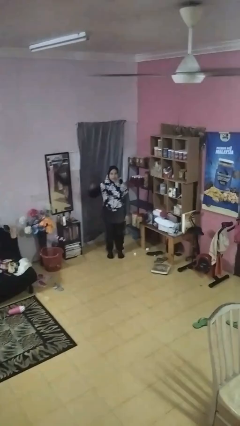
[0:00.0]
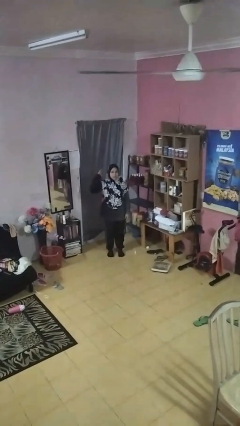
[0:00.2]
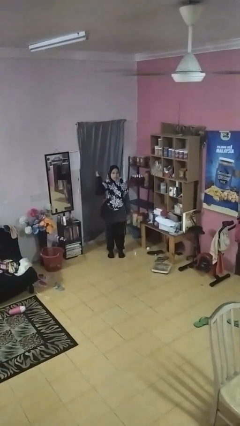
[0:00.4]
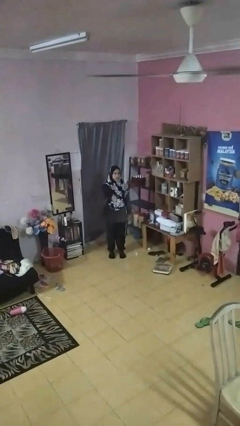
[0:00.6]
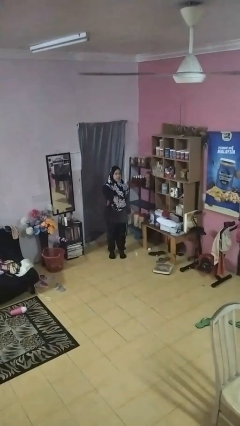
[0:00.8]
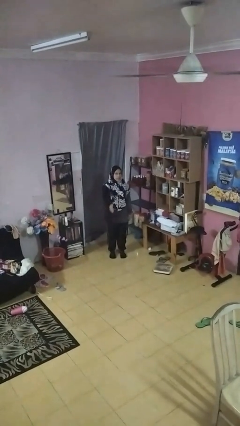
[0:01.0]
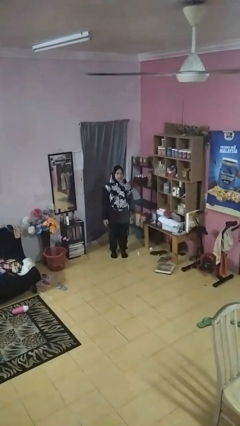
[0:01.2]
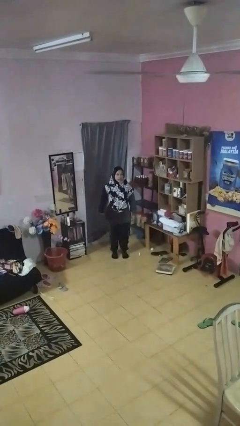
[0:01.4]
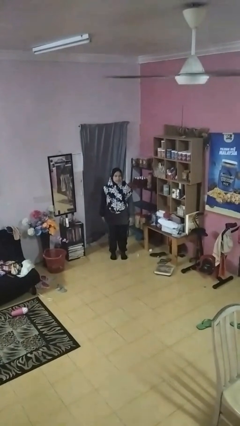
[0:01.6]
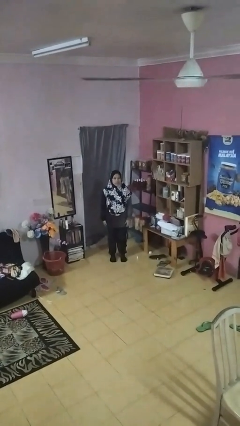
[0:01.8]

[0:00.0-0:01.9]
person karate chop

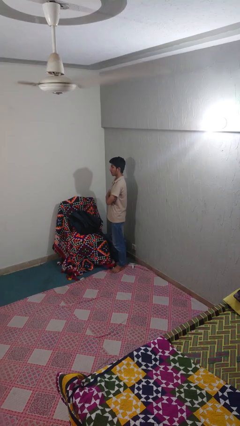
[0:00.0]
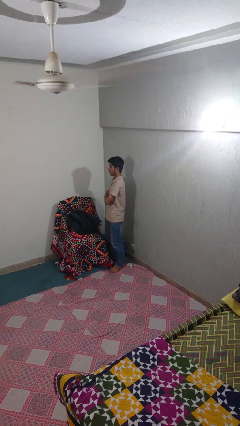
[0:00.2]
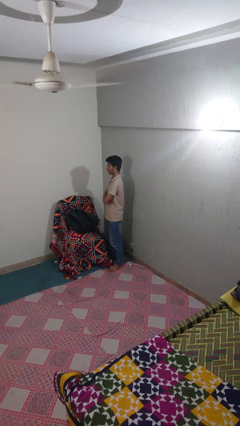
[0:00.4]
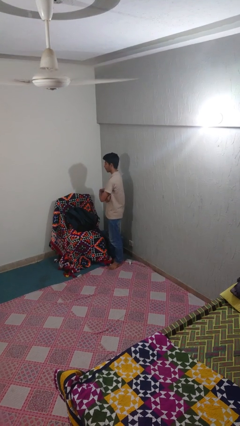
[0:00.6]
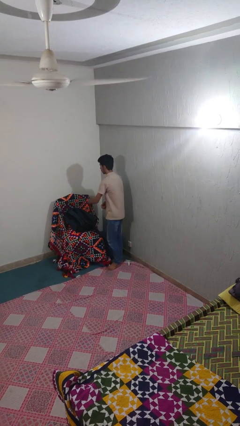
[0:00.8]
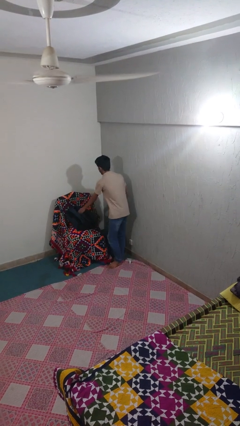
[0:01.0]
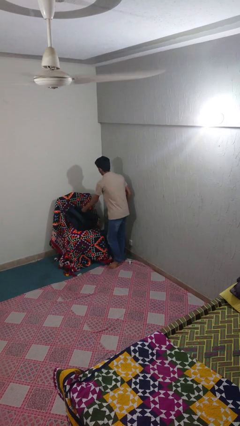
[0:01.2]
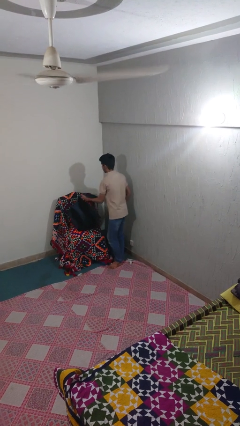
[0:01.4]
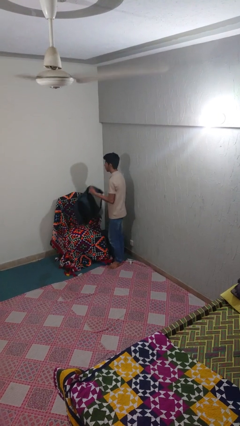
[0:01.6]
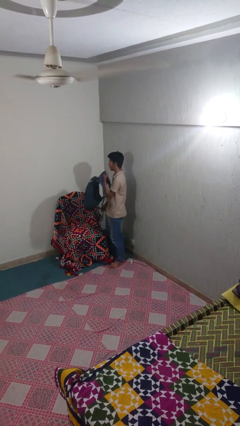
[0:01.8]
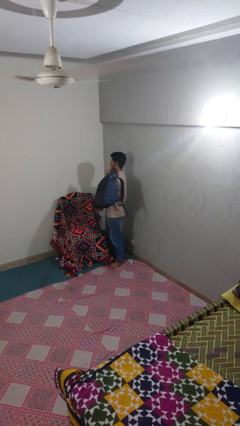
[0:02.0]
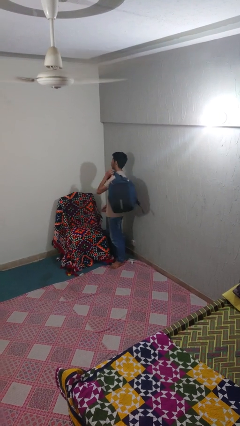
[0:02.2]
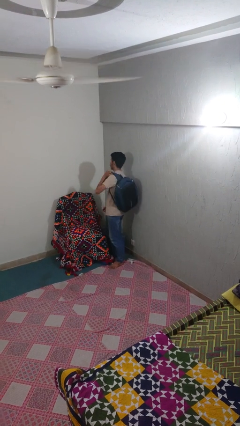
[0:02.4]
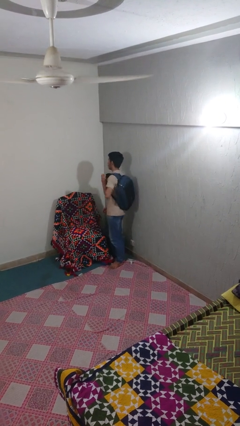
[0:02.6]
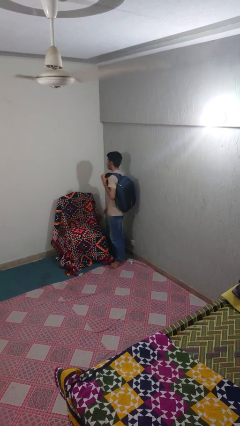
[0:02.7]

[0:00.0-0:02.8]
person picks up object from couch

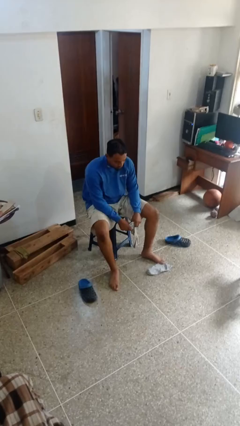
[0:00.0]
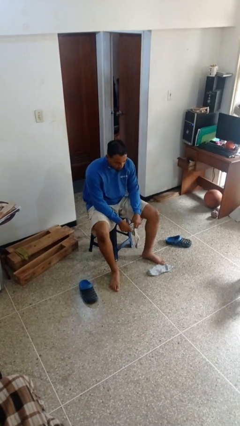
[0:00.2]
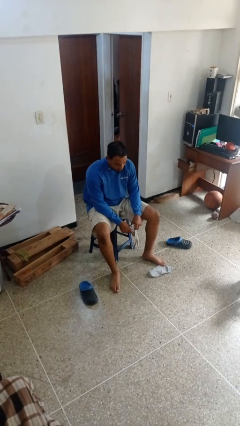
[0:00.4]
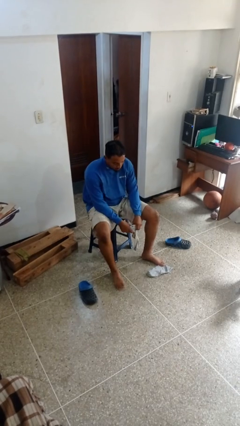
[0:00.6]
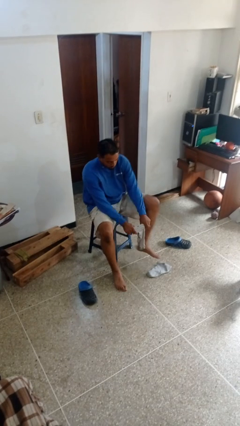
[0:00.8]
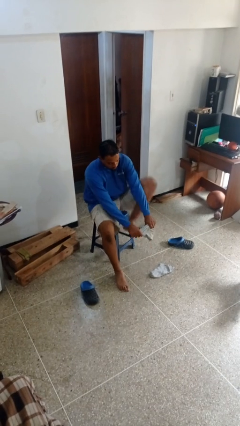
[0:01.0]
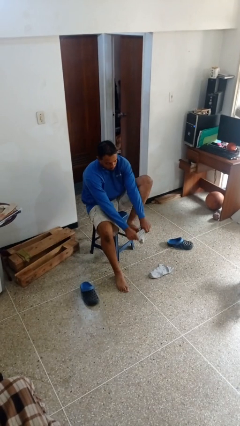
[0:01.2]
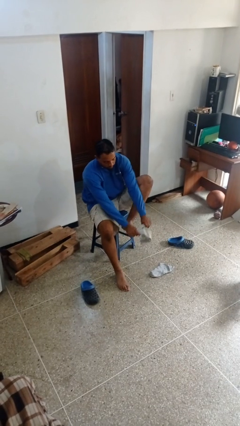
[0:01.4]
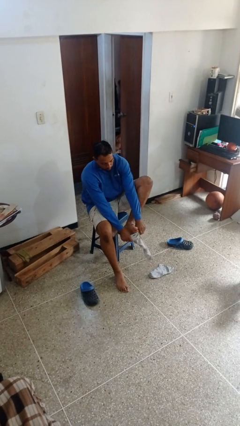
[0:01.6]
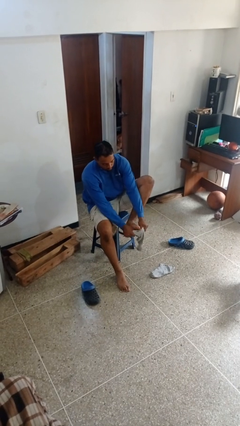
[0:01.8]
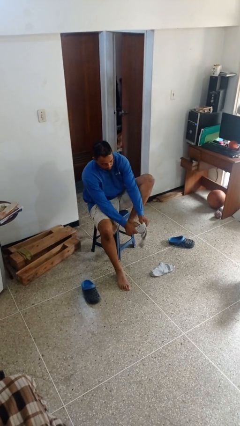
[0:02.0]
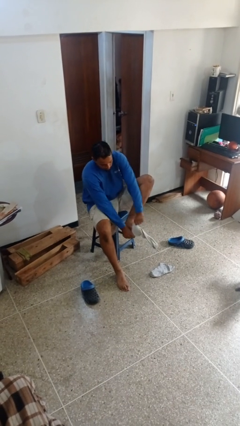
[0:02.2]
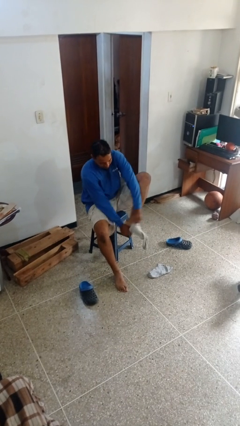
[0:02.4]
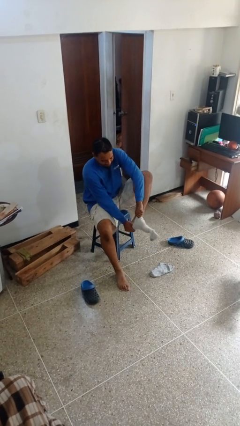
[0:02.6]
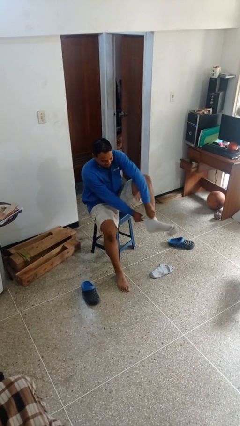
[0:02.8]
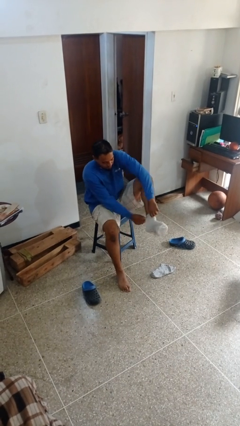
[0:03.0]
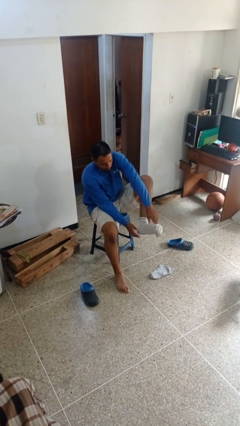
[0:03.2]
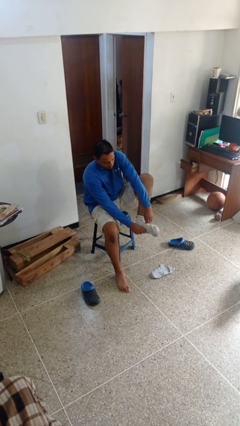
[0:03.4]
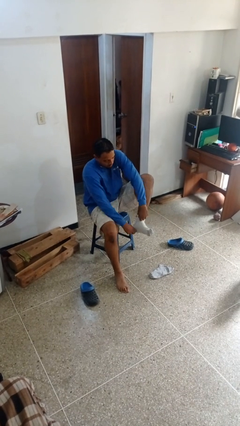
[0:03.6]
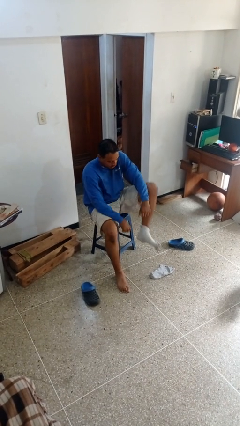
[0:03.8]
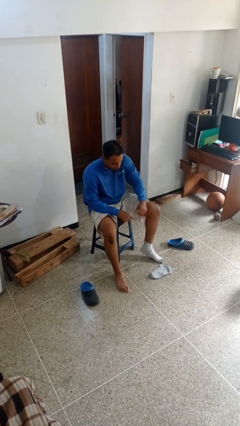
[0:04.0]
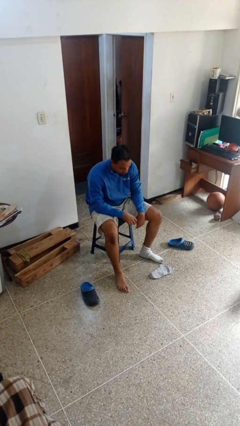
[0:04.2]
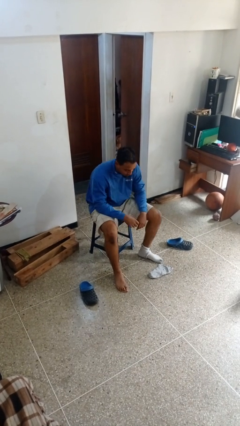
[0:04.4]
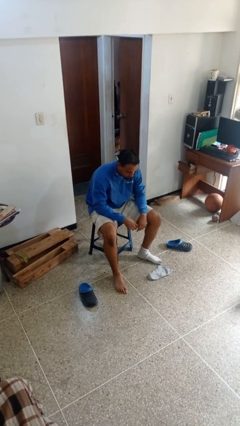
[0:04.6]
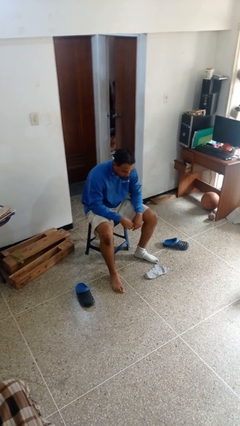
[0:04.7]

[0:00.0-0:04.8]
person puts on socks

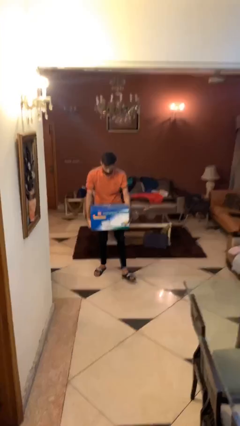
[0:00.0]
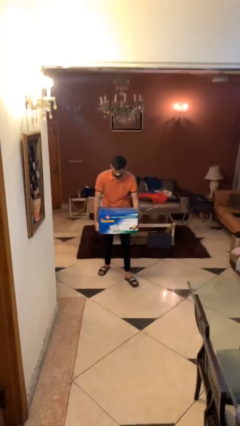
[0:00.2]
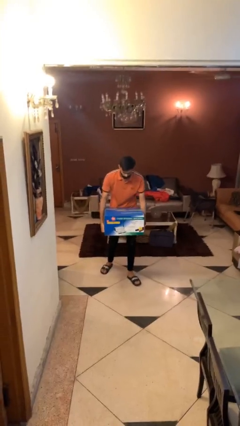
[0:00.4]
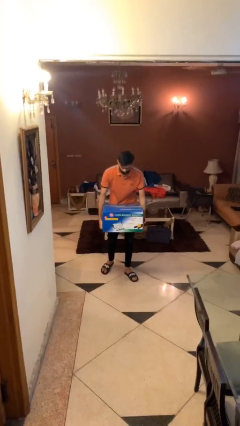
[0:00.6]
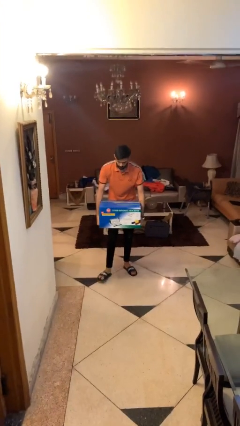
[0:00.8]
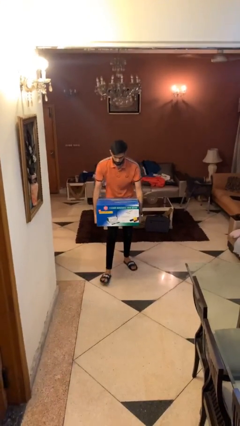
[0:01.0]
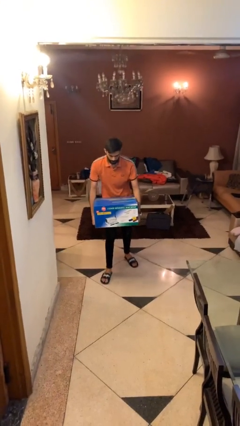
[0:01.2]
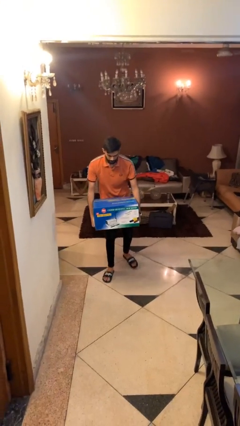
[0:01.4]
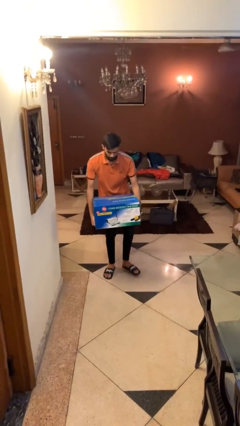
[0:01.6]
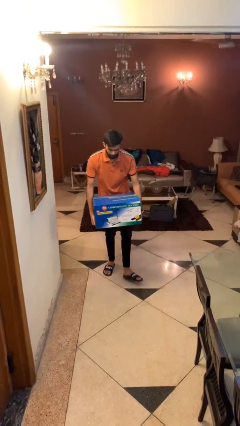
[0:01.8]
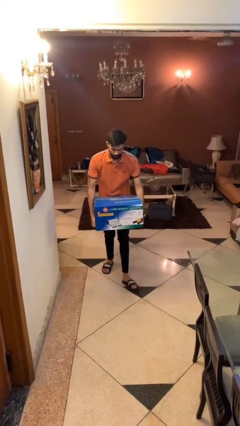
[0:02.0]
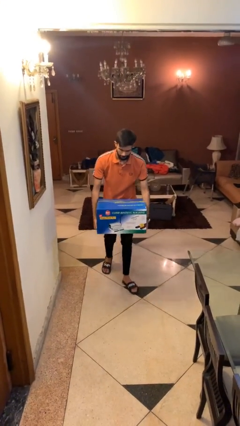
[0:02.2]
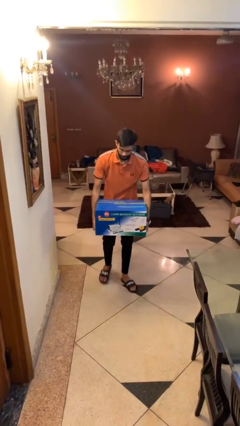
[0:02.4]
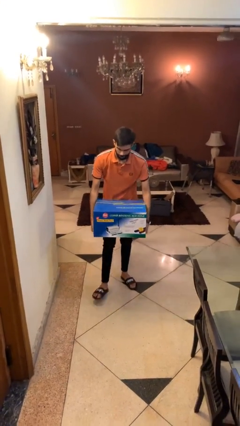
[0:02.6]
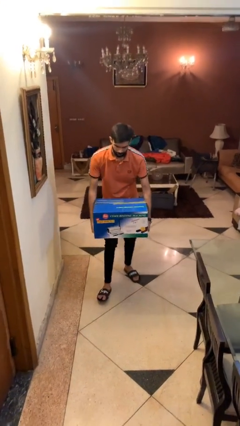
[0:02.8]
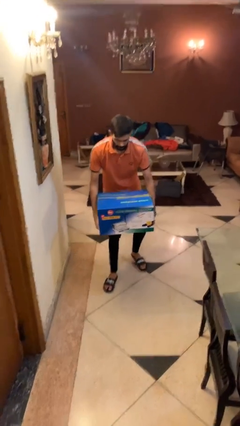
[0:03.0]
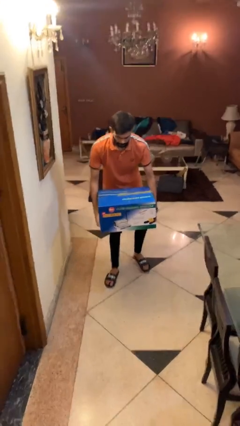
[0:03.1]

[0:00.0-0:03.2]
person carries heavy object

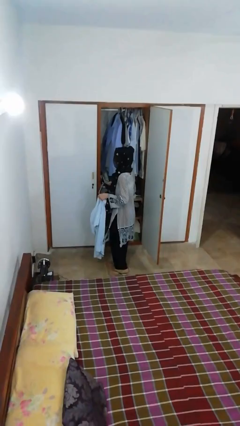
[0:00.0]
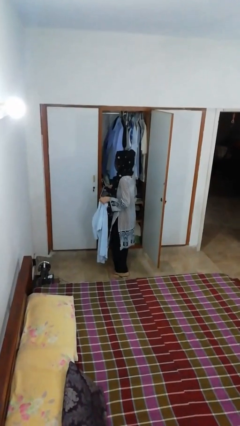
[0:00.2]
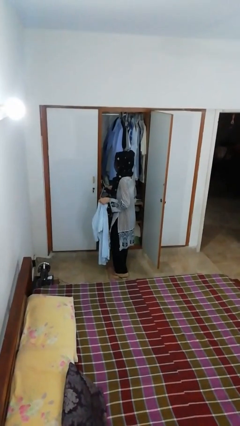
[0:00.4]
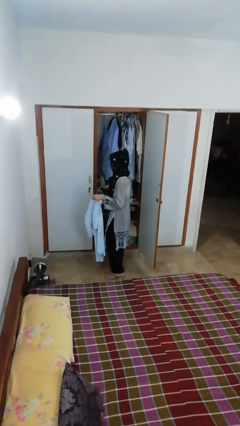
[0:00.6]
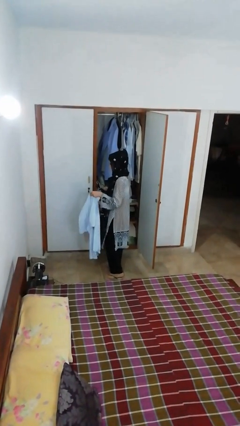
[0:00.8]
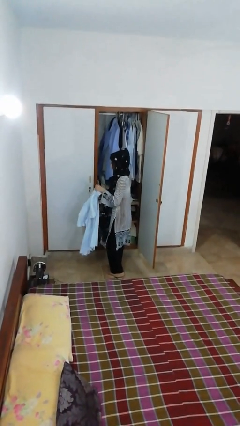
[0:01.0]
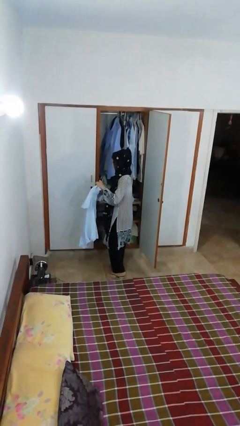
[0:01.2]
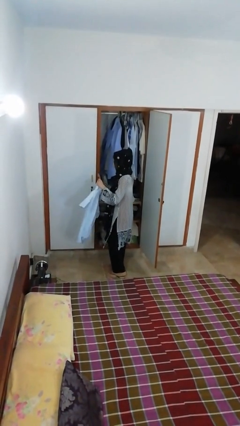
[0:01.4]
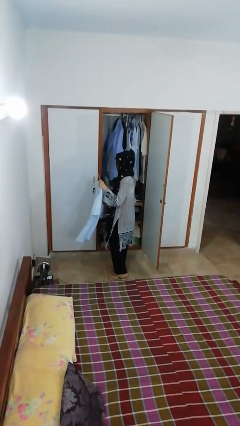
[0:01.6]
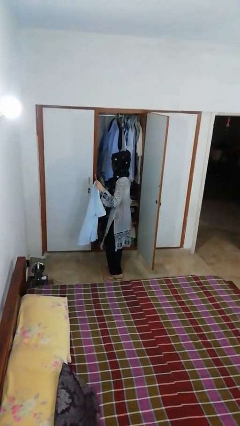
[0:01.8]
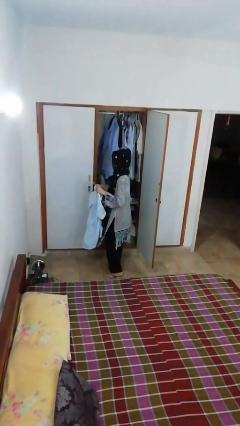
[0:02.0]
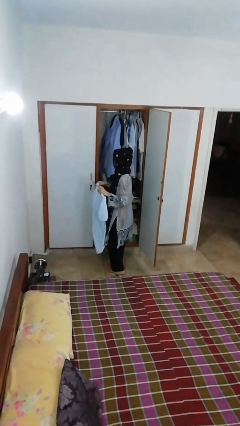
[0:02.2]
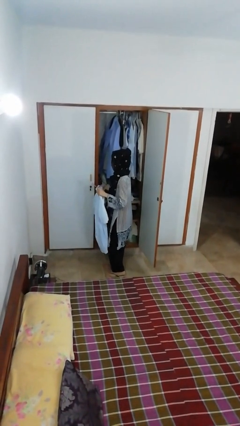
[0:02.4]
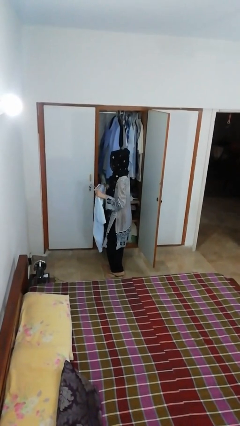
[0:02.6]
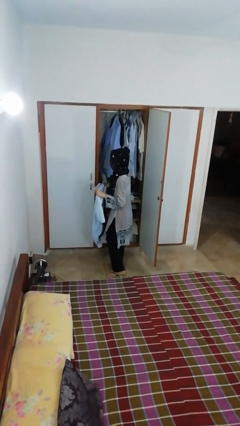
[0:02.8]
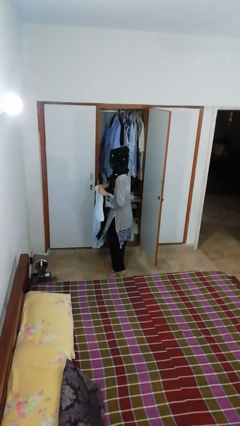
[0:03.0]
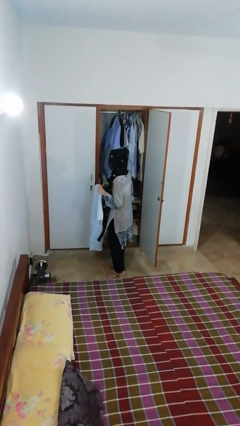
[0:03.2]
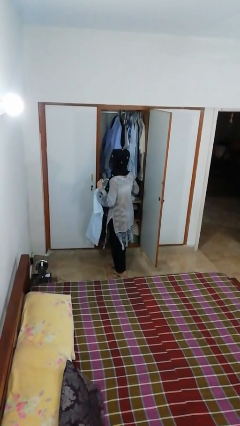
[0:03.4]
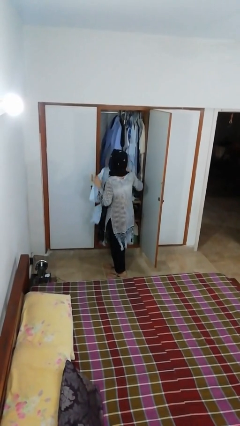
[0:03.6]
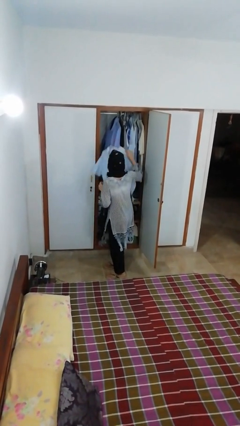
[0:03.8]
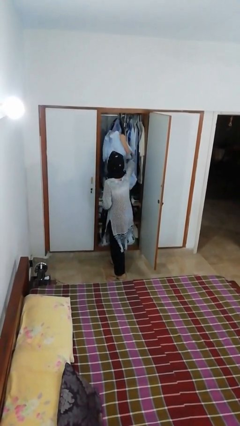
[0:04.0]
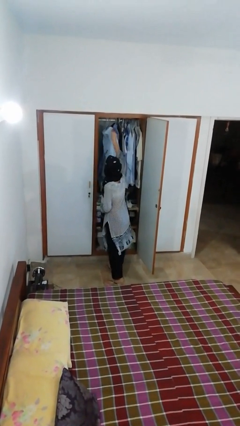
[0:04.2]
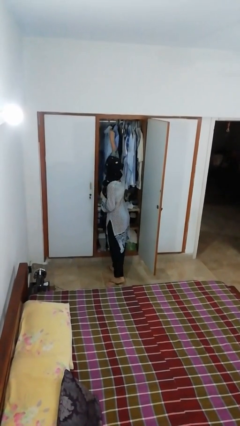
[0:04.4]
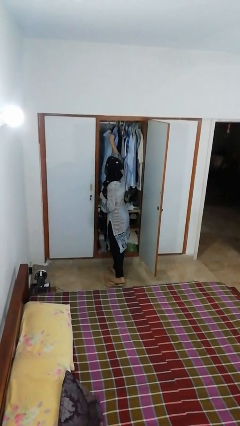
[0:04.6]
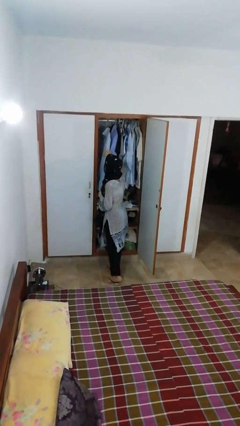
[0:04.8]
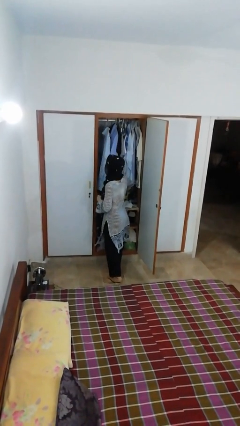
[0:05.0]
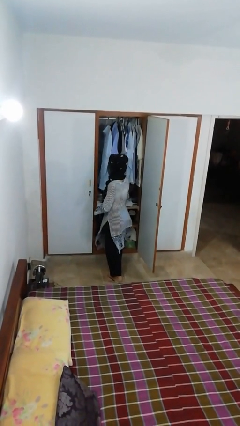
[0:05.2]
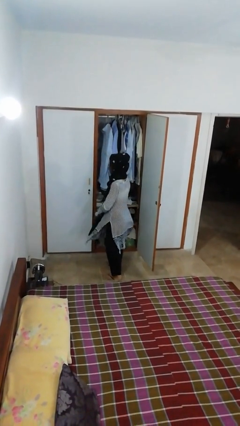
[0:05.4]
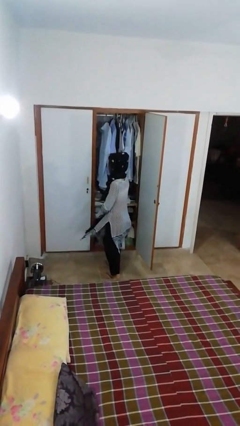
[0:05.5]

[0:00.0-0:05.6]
person puts clothes into closet
